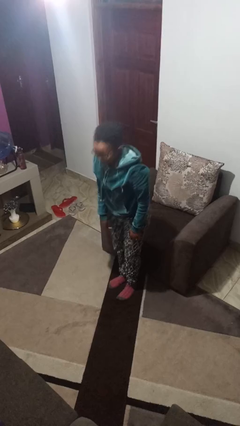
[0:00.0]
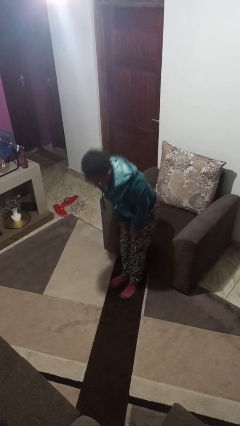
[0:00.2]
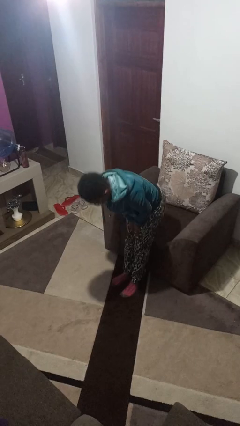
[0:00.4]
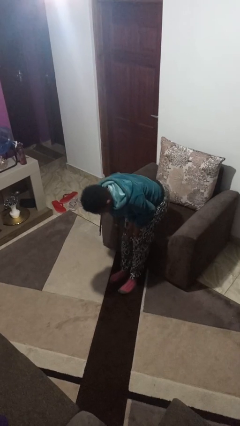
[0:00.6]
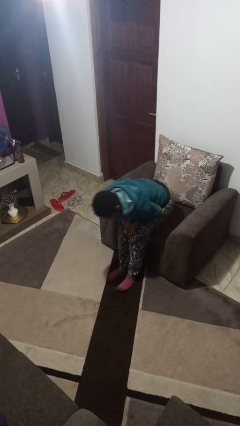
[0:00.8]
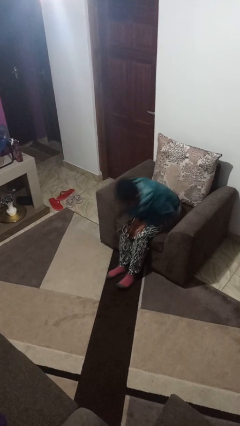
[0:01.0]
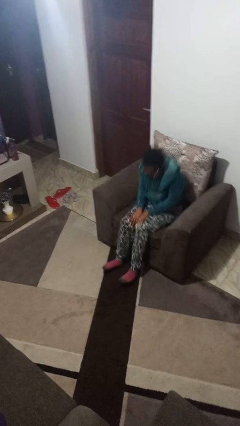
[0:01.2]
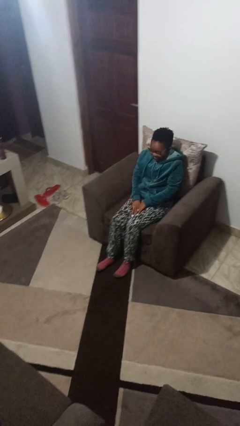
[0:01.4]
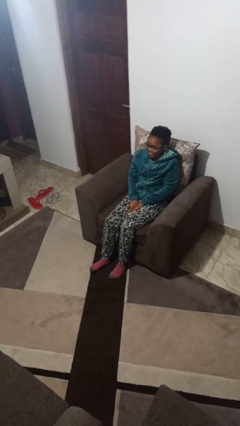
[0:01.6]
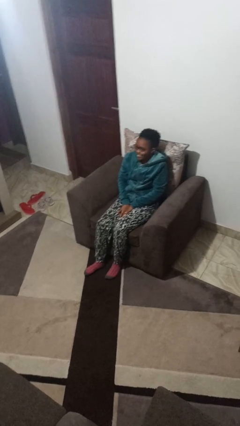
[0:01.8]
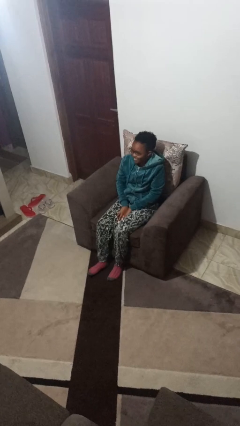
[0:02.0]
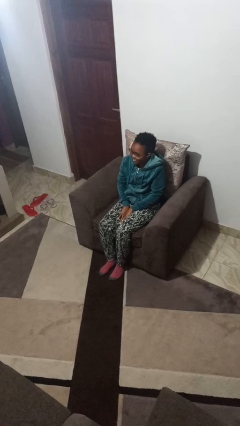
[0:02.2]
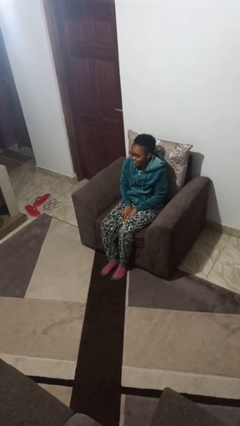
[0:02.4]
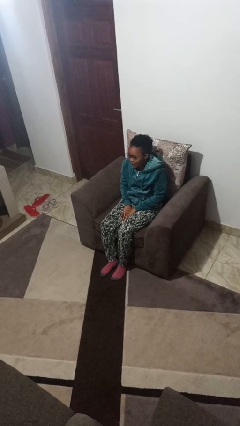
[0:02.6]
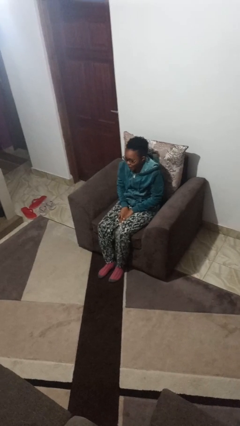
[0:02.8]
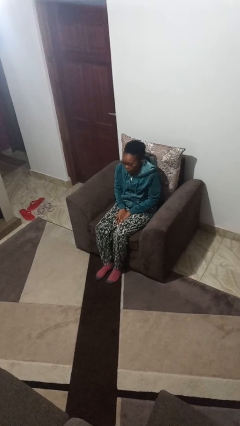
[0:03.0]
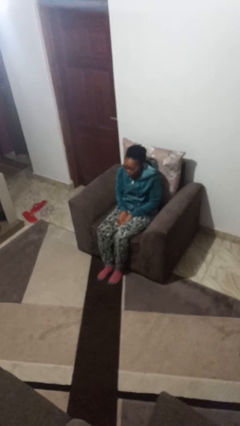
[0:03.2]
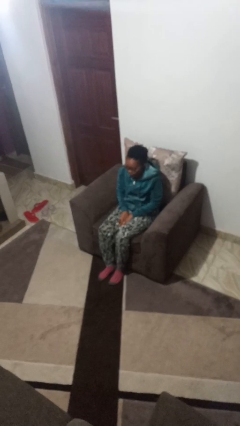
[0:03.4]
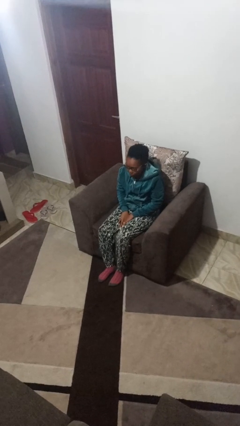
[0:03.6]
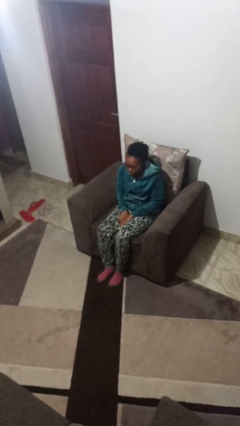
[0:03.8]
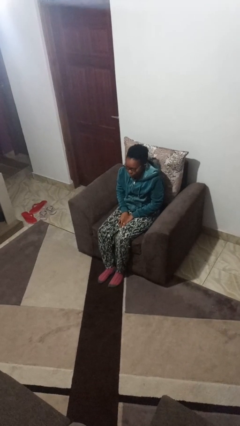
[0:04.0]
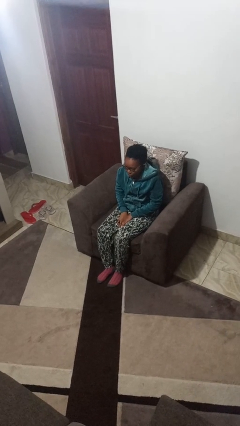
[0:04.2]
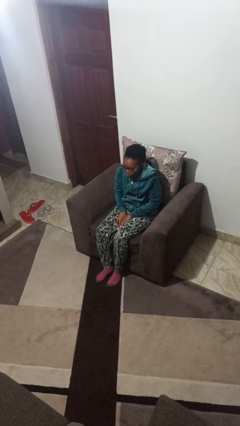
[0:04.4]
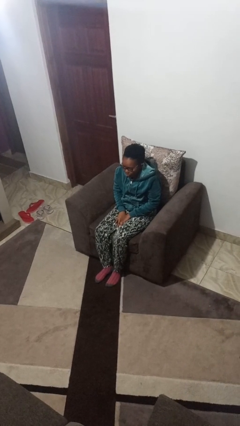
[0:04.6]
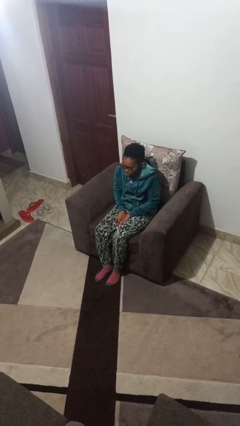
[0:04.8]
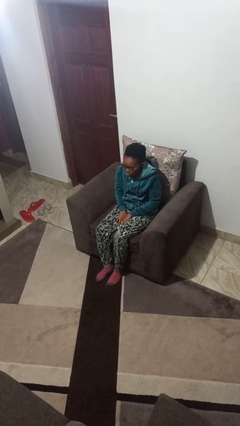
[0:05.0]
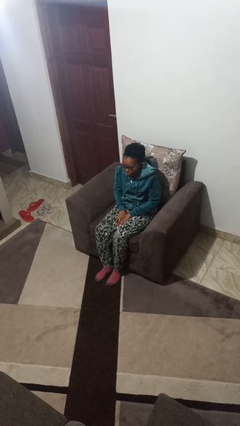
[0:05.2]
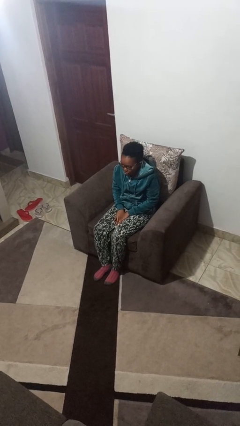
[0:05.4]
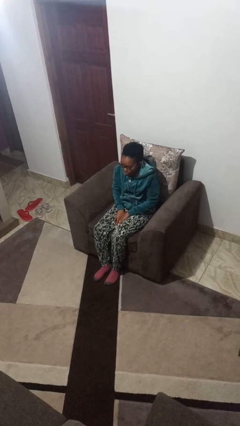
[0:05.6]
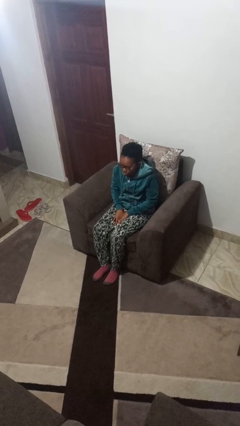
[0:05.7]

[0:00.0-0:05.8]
person sits down

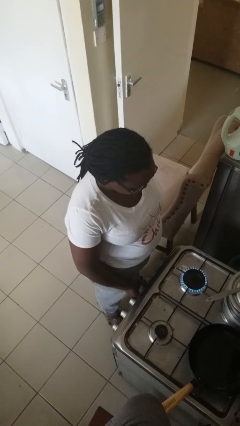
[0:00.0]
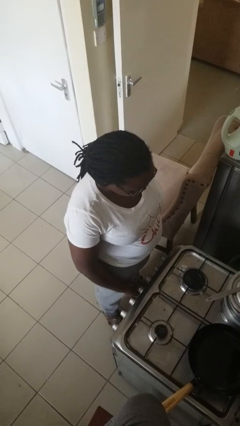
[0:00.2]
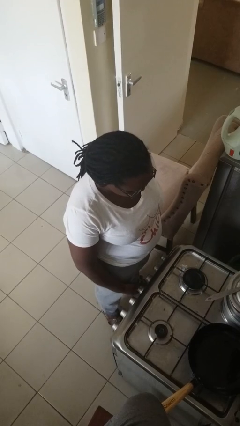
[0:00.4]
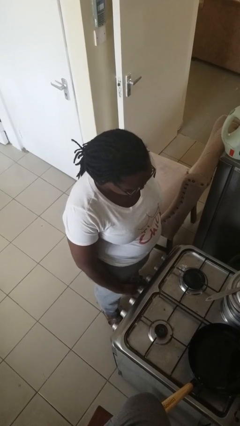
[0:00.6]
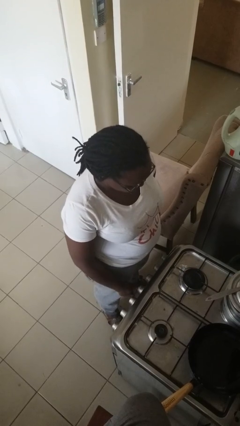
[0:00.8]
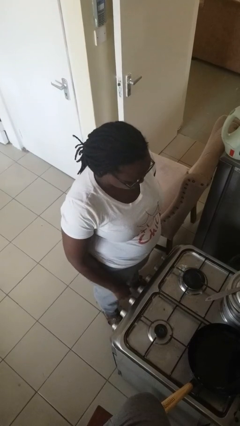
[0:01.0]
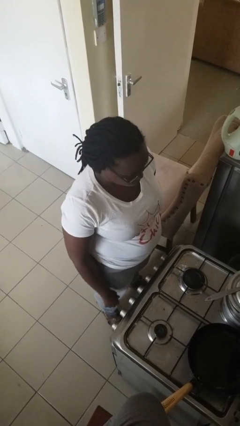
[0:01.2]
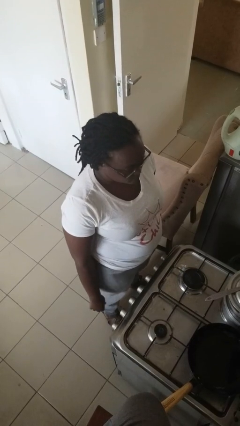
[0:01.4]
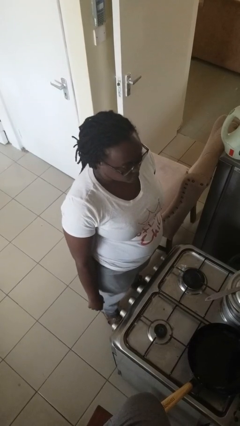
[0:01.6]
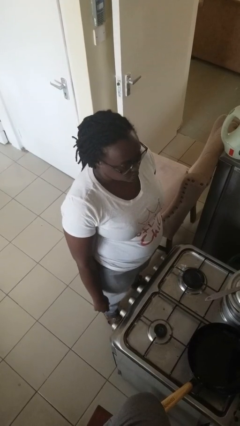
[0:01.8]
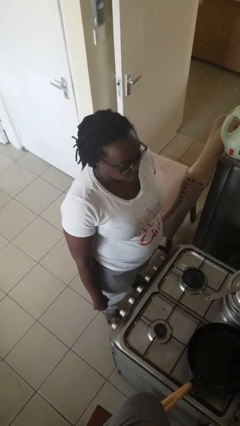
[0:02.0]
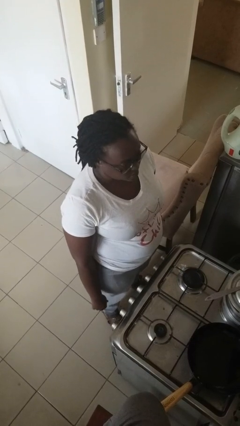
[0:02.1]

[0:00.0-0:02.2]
person turns off stovetop

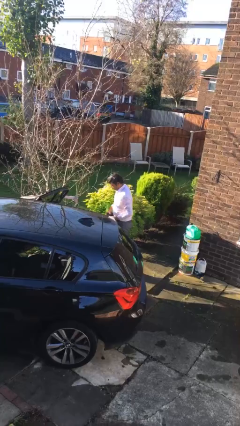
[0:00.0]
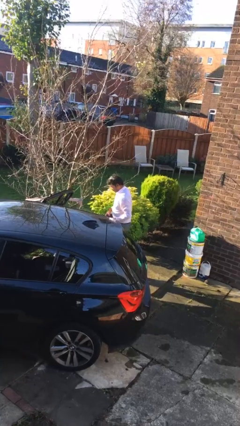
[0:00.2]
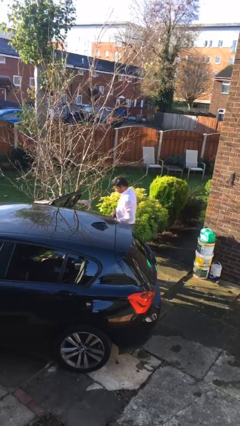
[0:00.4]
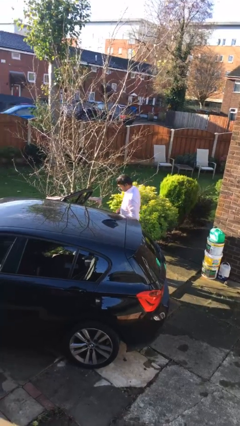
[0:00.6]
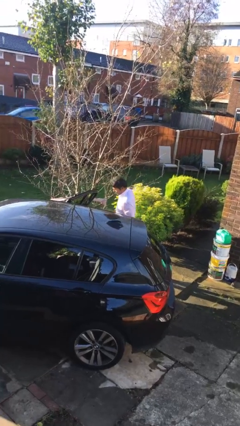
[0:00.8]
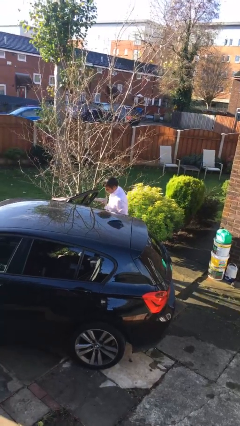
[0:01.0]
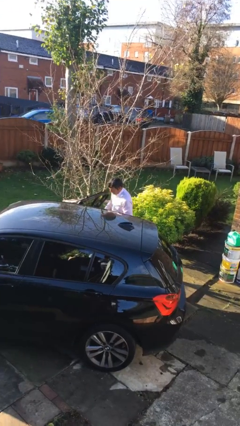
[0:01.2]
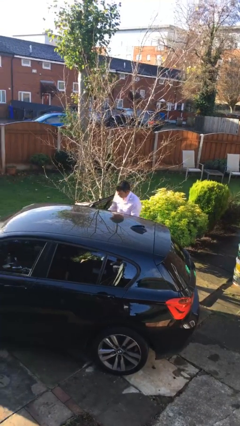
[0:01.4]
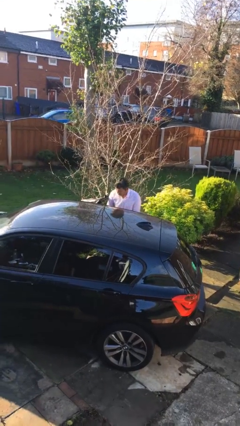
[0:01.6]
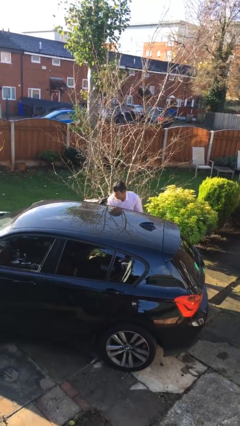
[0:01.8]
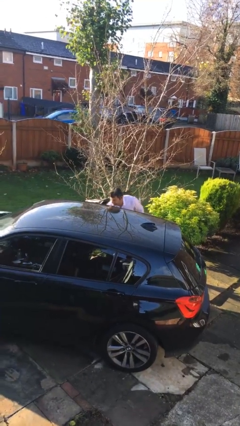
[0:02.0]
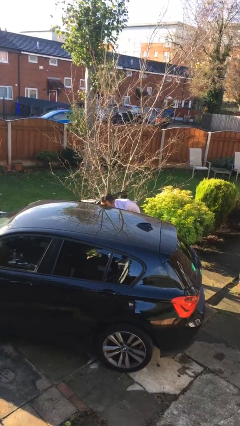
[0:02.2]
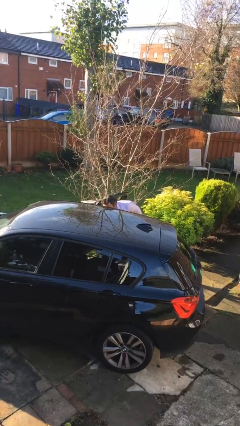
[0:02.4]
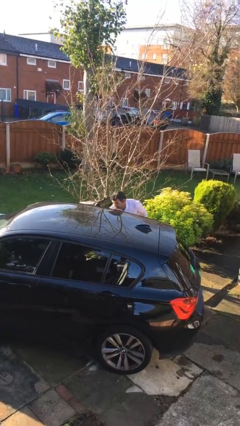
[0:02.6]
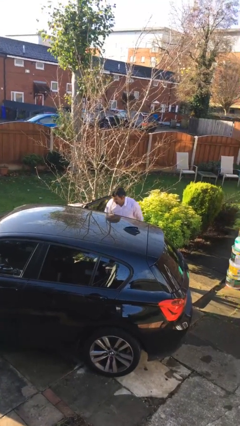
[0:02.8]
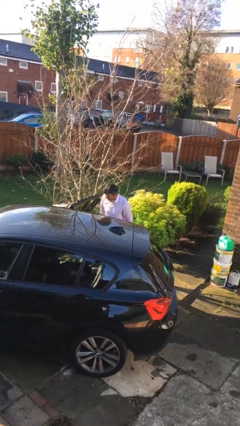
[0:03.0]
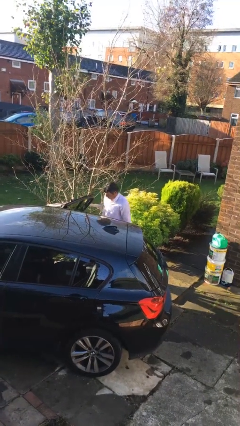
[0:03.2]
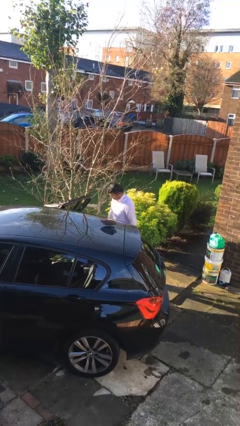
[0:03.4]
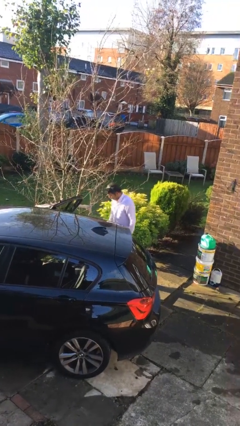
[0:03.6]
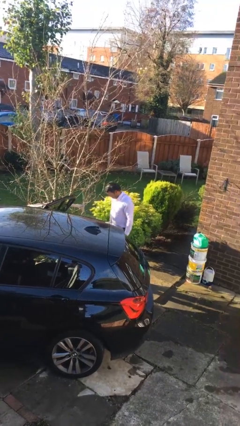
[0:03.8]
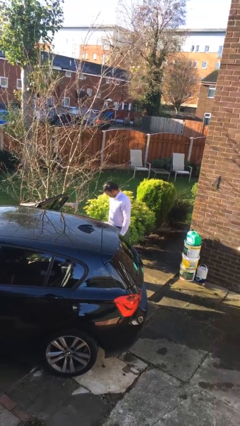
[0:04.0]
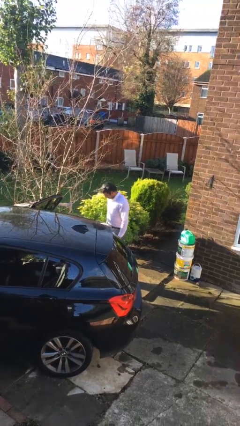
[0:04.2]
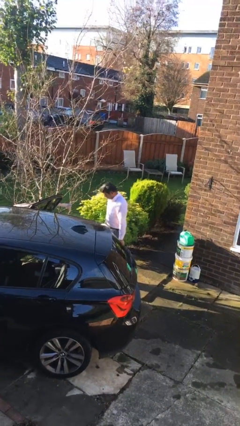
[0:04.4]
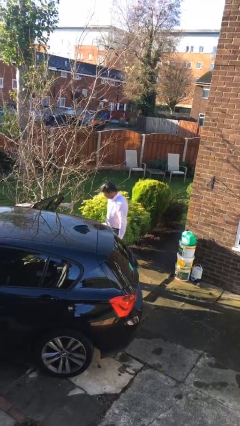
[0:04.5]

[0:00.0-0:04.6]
person loads car

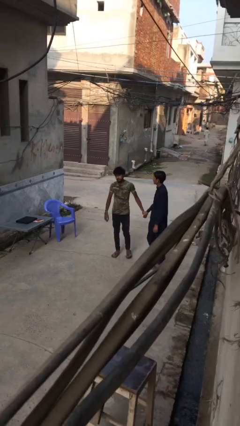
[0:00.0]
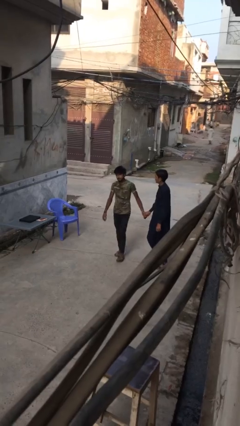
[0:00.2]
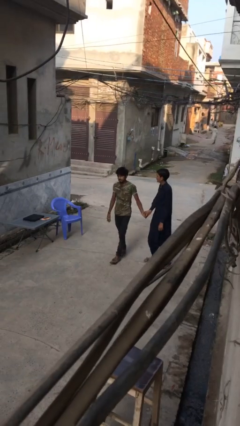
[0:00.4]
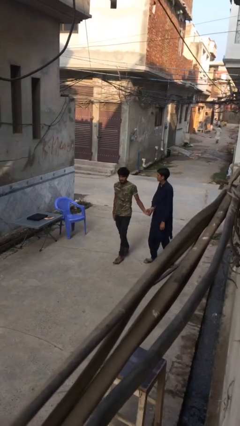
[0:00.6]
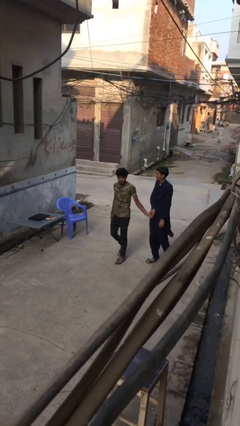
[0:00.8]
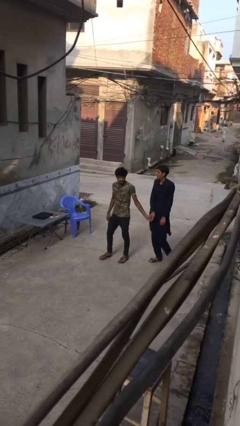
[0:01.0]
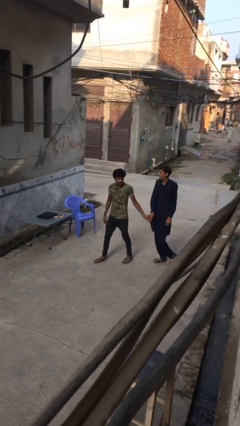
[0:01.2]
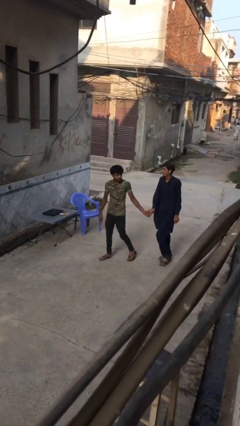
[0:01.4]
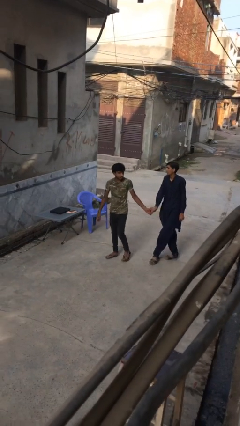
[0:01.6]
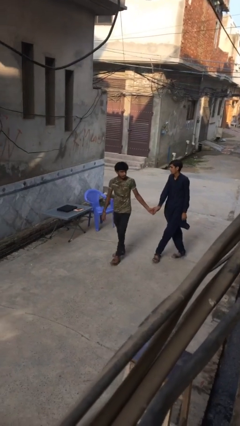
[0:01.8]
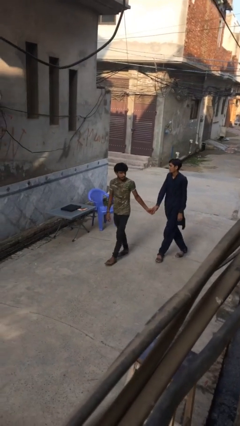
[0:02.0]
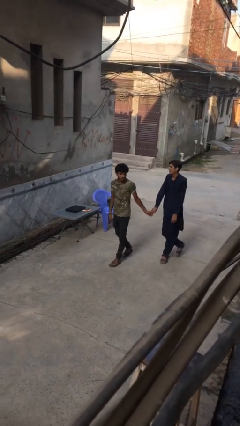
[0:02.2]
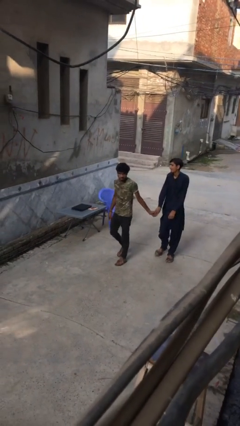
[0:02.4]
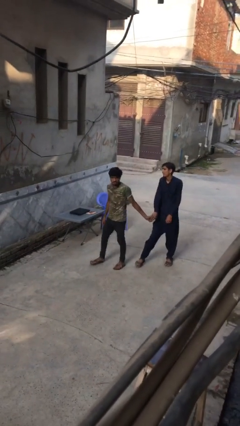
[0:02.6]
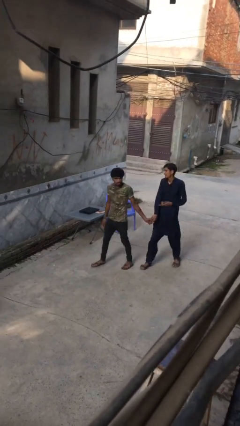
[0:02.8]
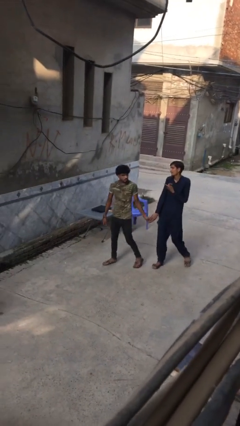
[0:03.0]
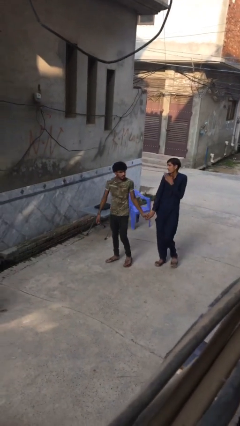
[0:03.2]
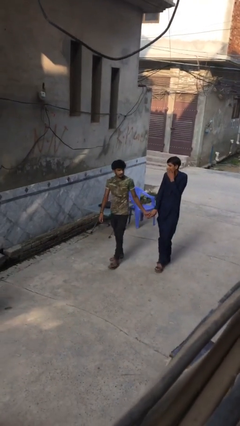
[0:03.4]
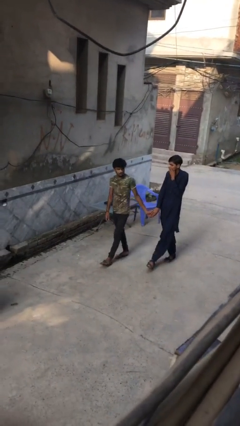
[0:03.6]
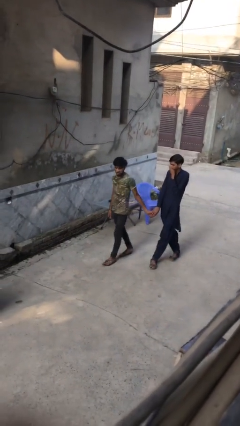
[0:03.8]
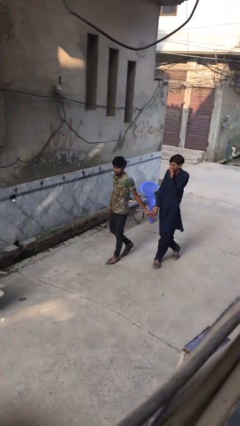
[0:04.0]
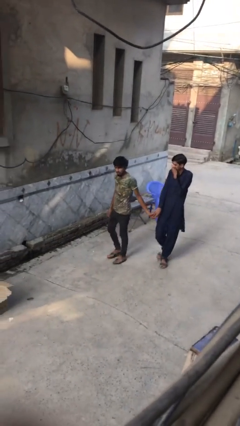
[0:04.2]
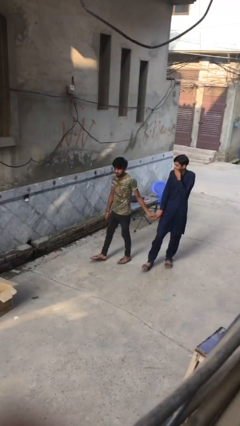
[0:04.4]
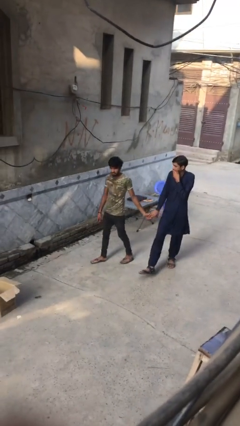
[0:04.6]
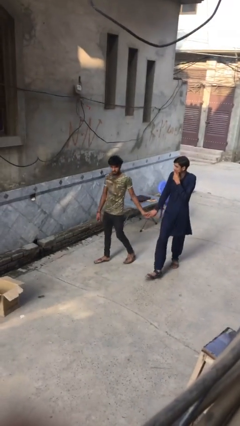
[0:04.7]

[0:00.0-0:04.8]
person talks to person

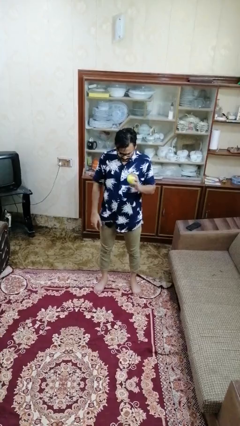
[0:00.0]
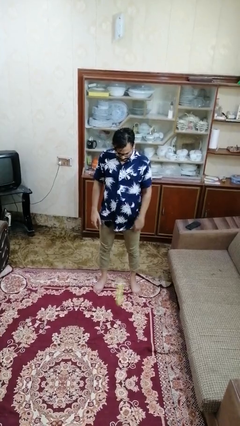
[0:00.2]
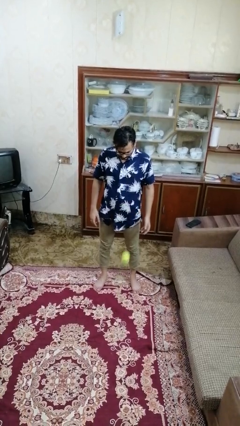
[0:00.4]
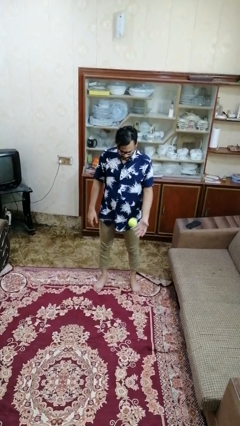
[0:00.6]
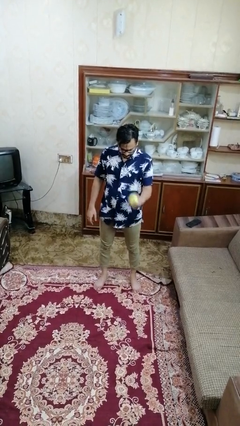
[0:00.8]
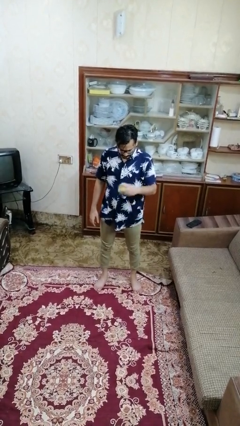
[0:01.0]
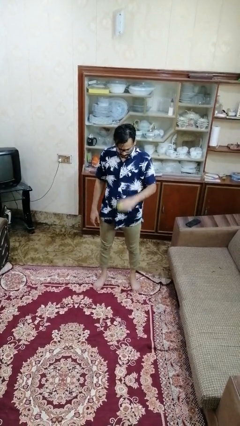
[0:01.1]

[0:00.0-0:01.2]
person bounces ball on floor
